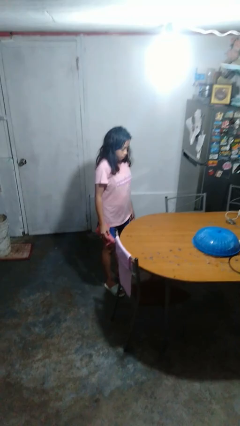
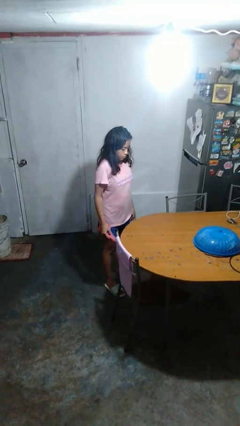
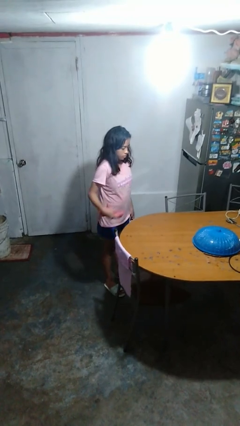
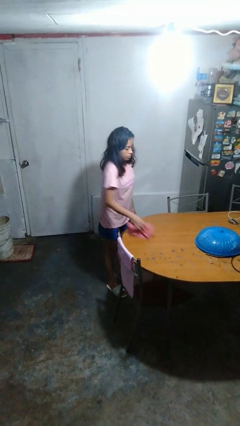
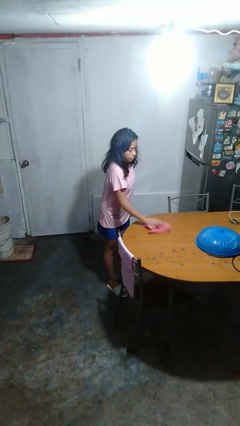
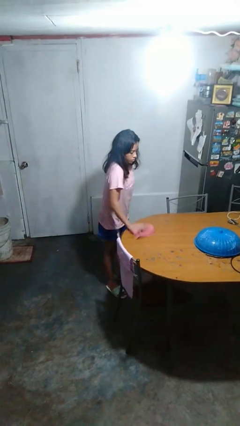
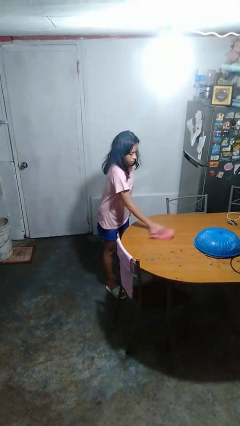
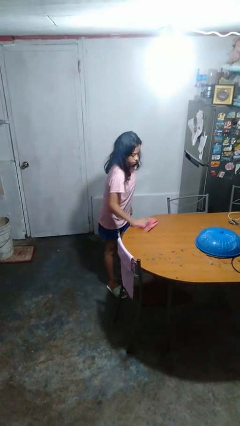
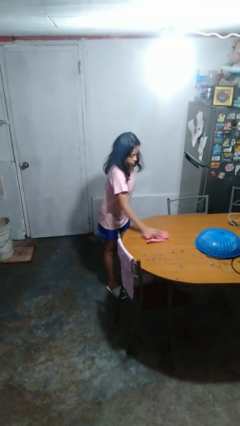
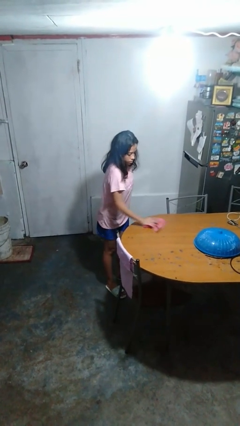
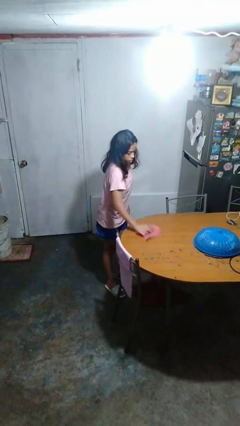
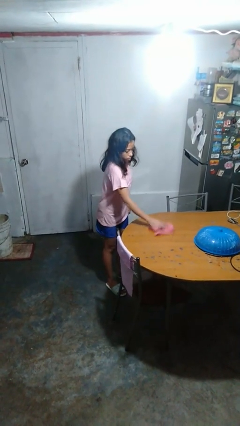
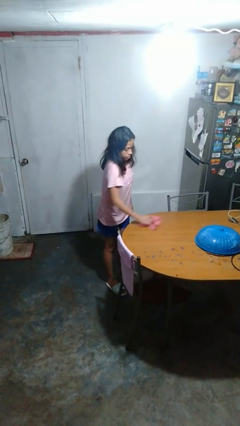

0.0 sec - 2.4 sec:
person cleans table with rag

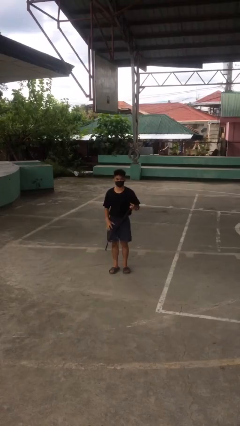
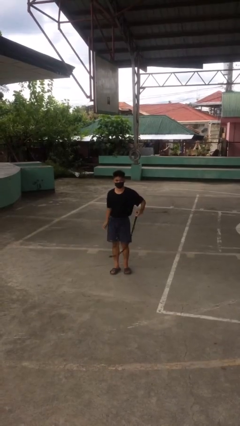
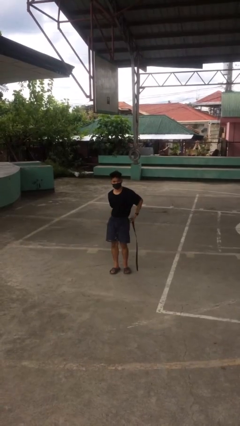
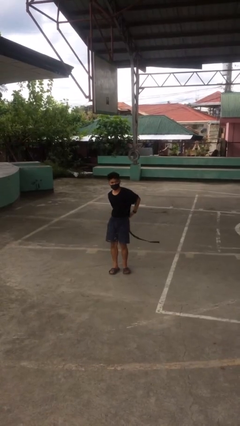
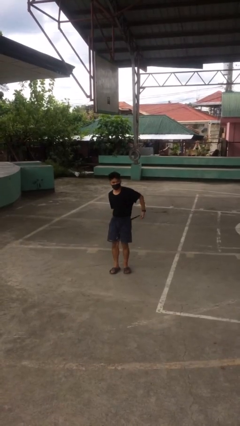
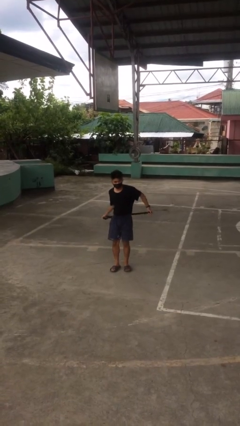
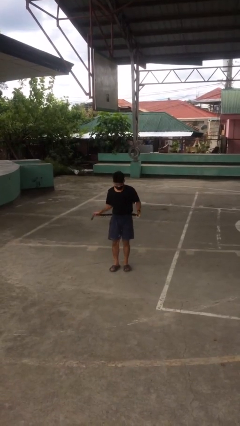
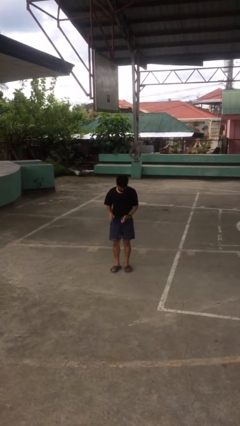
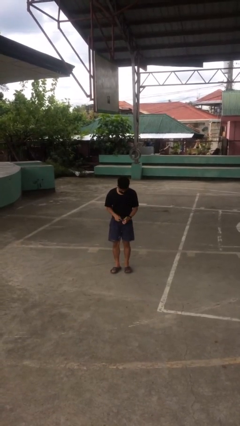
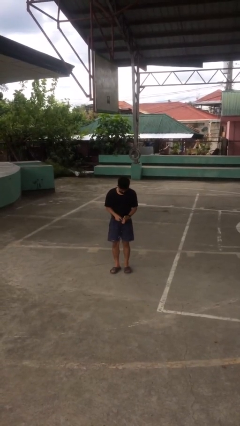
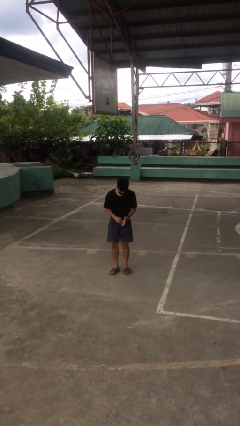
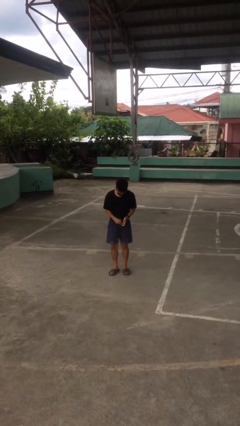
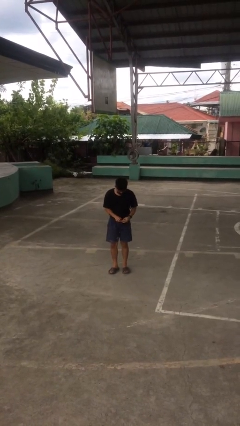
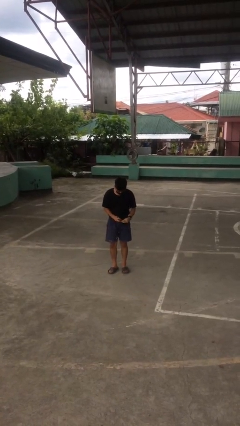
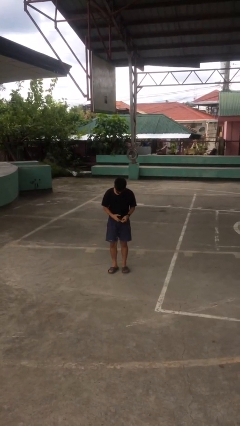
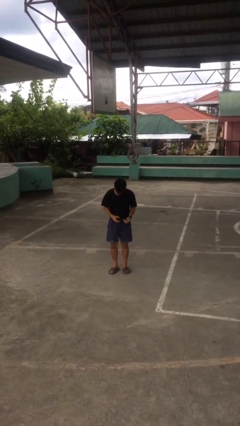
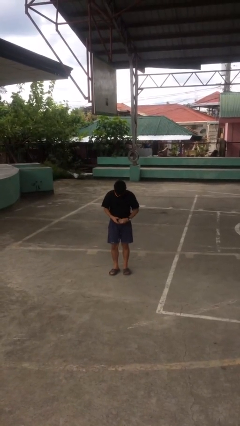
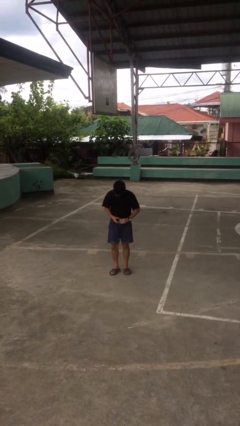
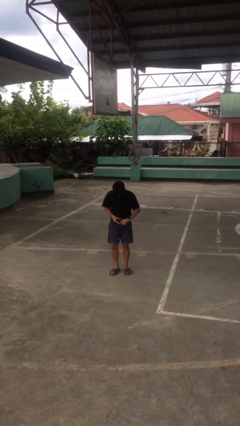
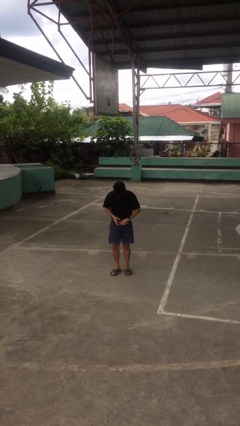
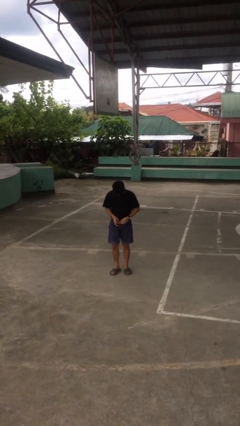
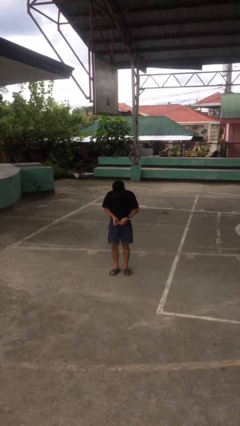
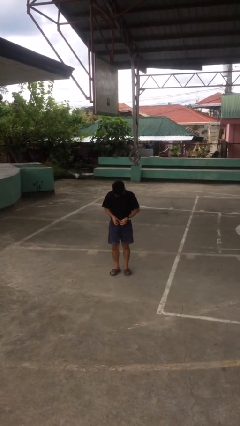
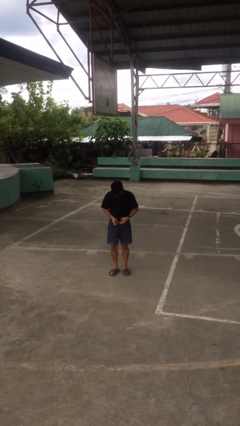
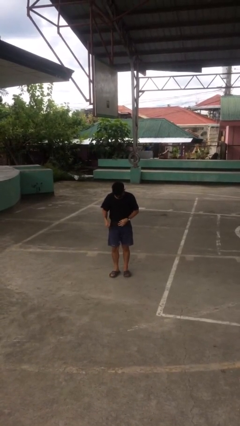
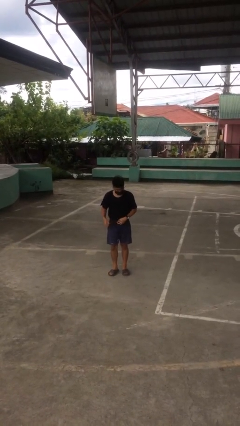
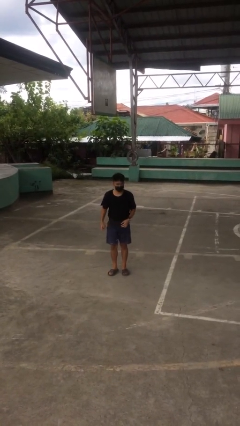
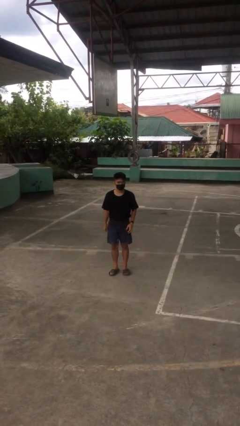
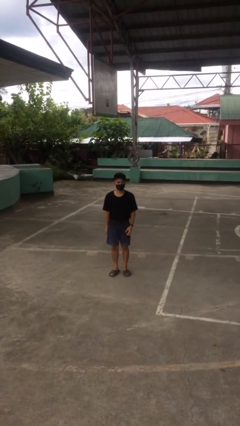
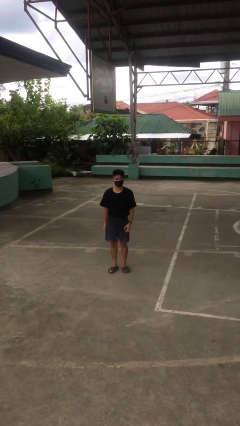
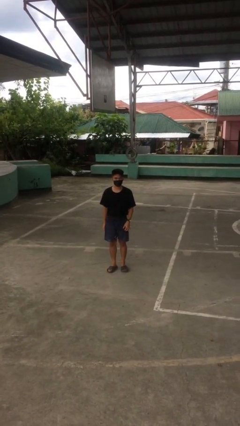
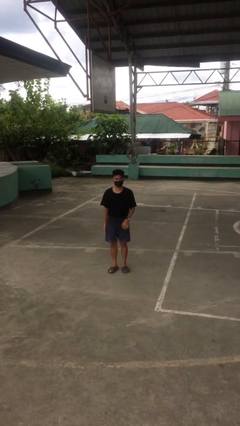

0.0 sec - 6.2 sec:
person puts on belt

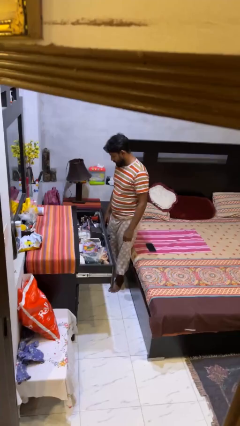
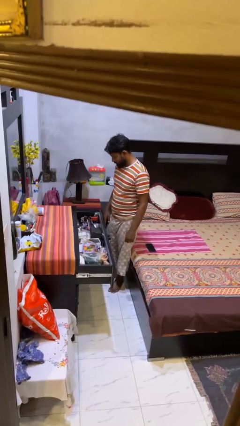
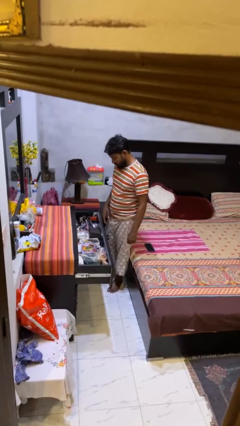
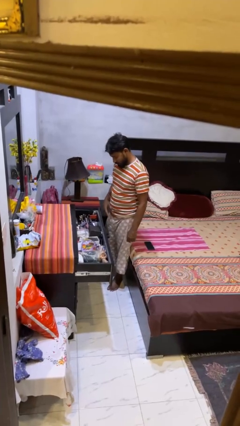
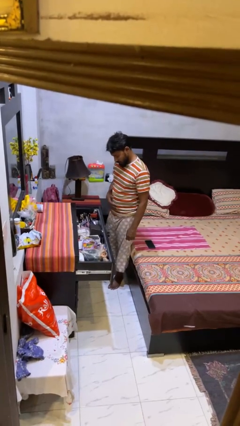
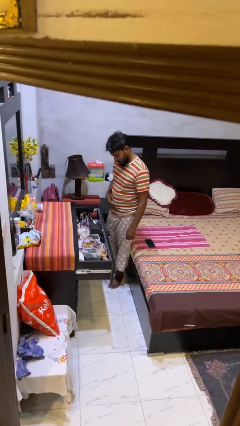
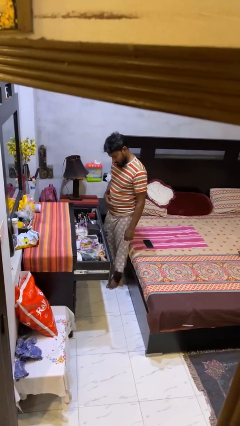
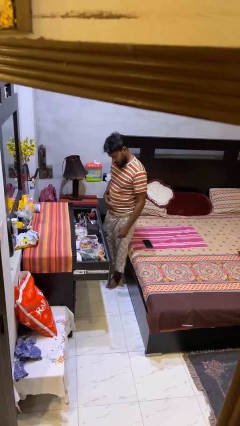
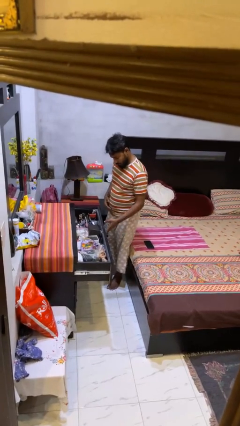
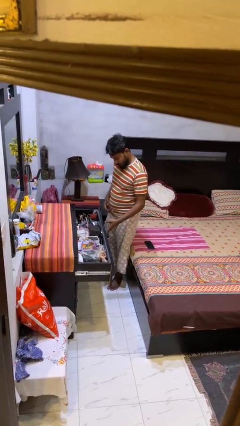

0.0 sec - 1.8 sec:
person opens dresser drawer

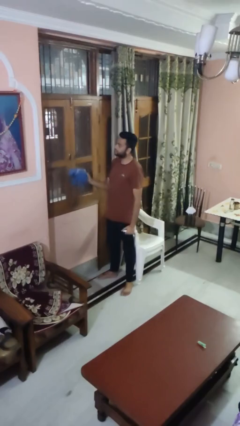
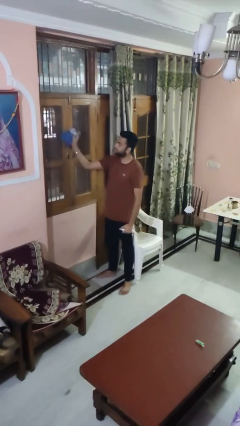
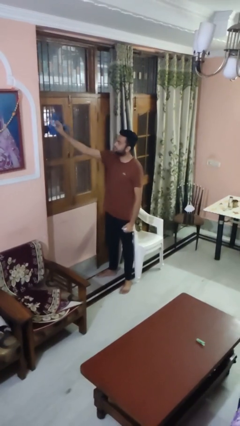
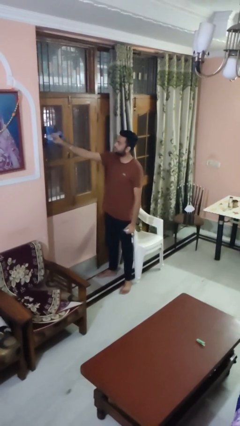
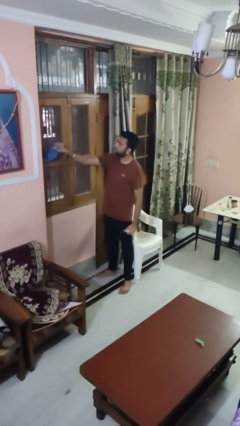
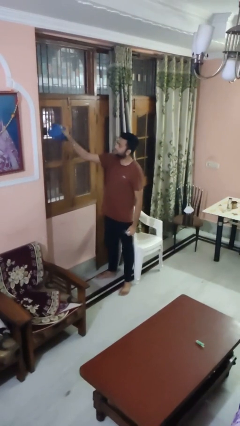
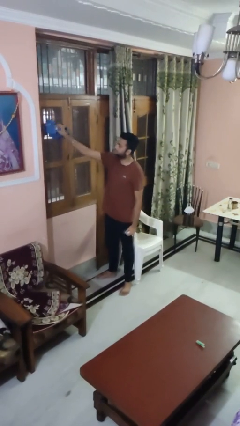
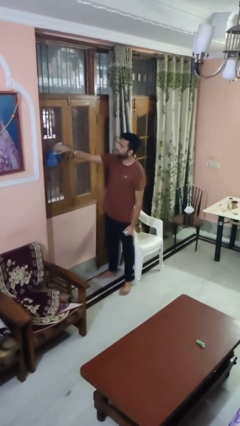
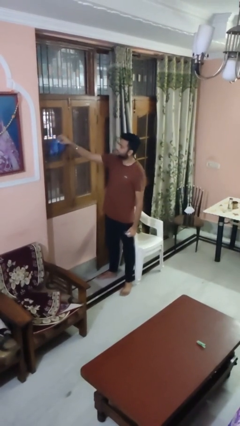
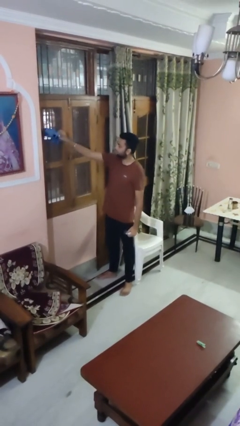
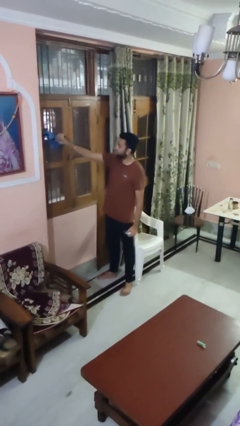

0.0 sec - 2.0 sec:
person washes window

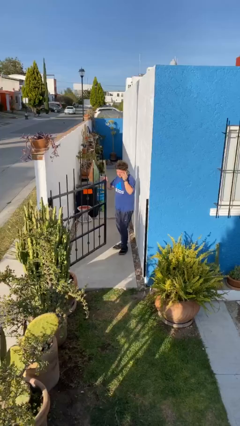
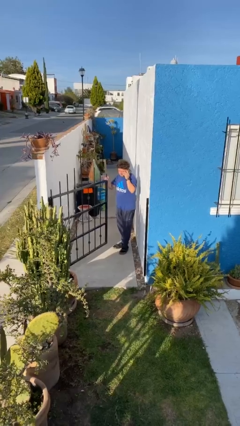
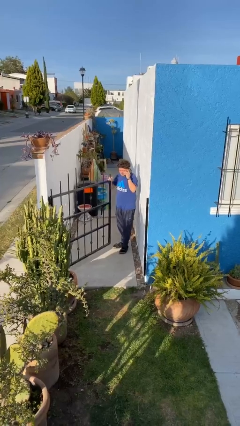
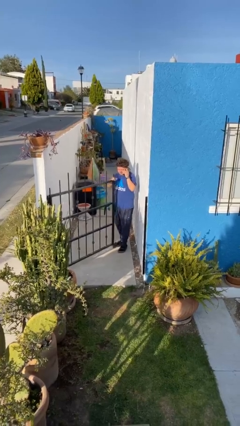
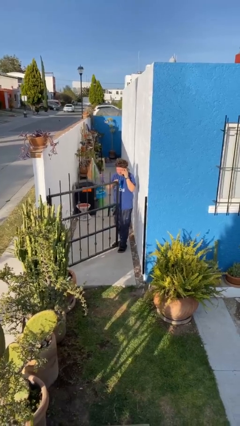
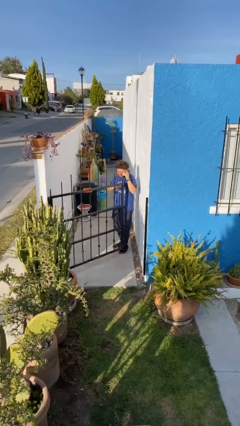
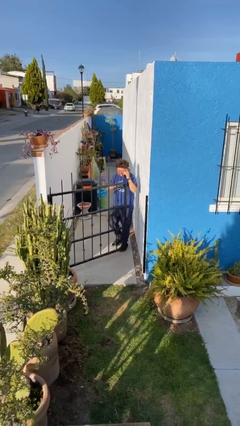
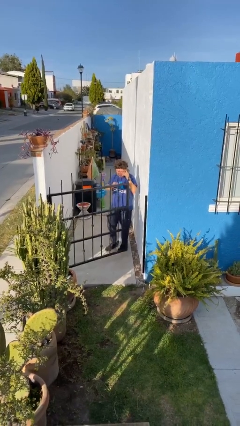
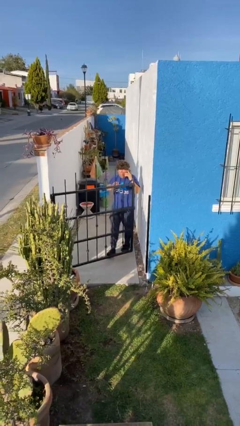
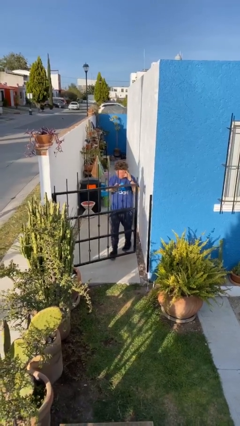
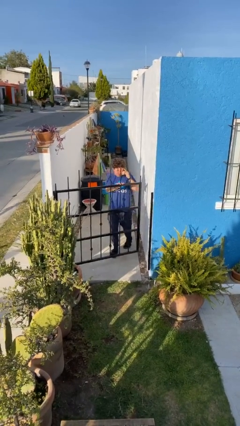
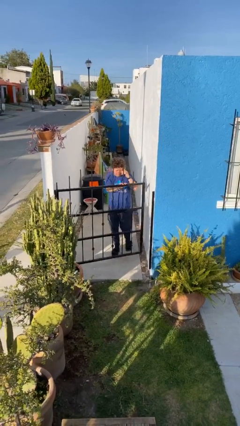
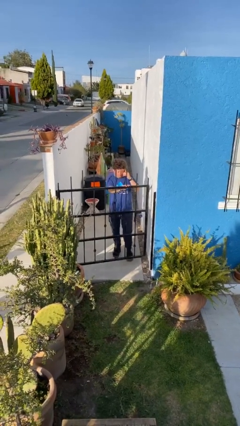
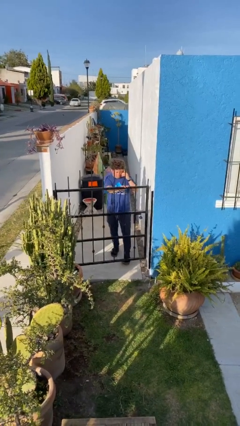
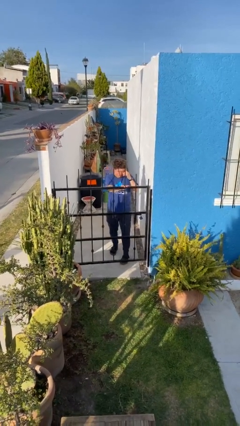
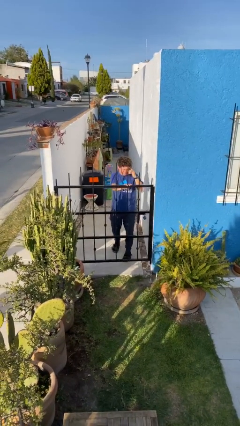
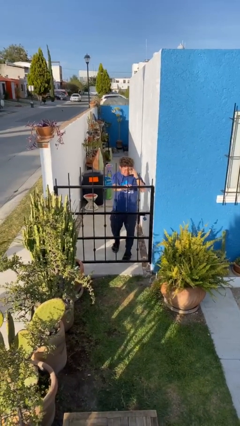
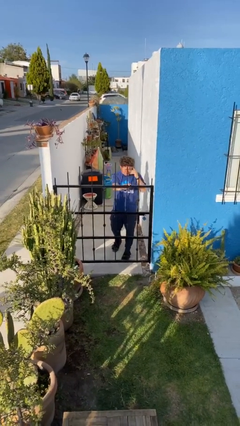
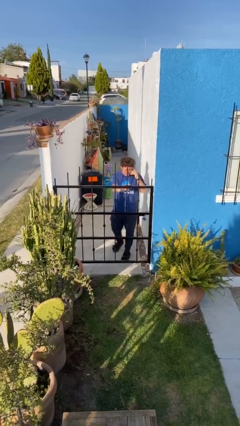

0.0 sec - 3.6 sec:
person closes facility door

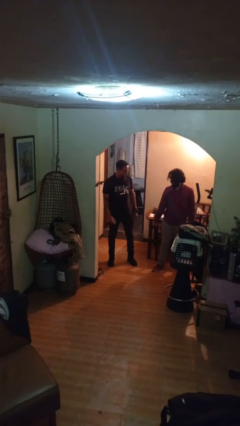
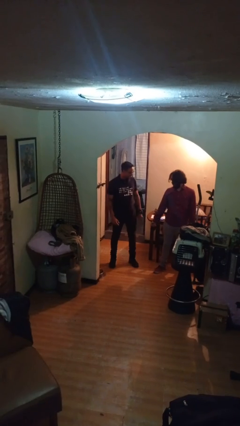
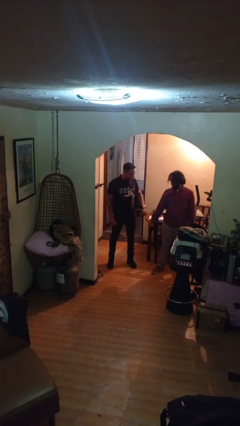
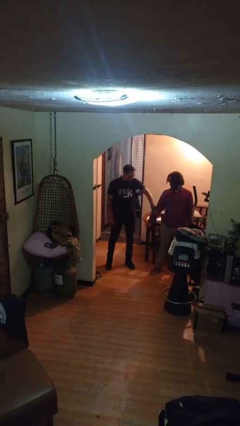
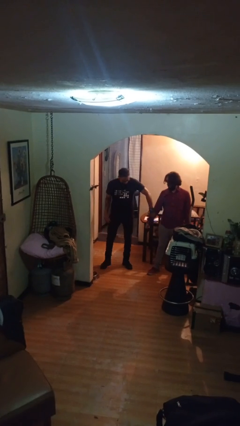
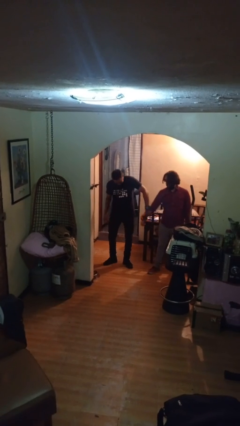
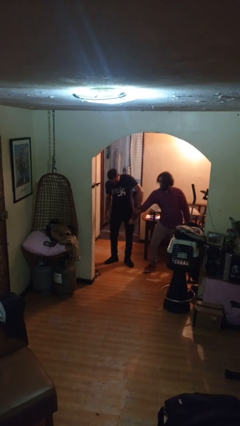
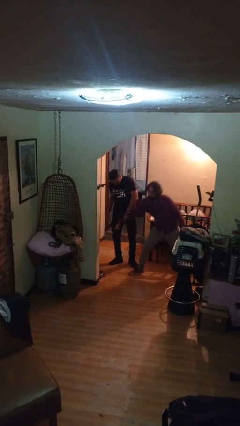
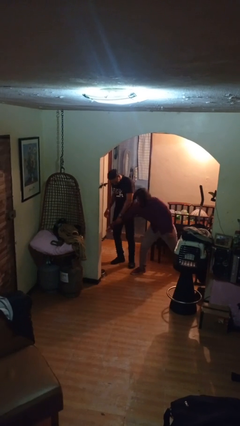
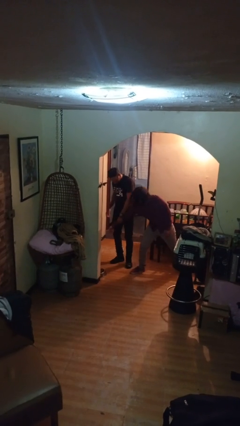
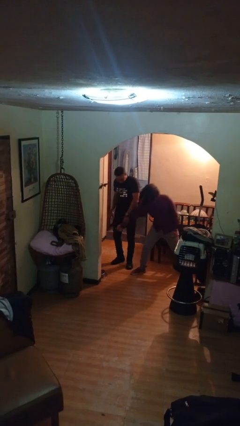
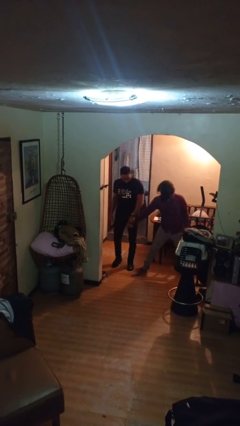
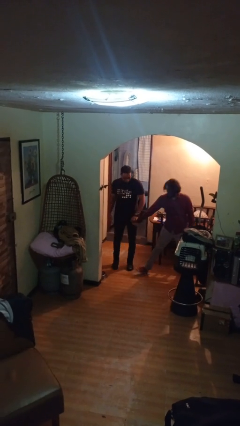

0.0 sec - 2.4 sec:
person grabs person by forearm
